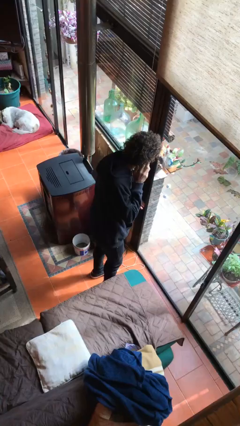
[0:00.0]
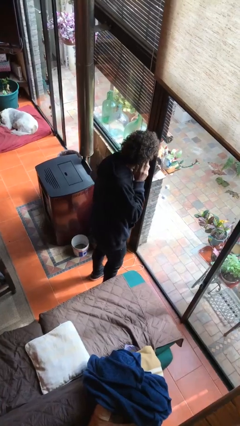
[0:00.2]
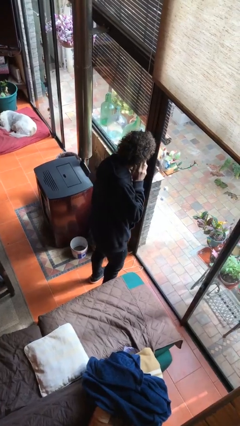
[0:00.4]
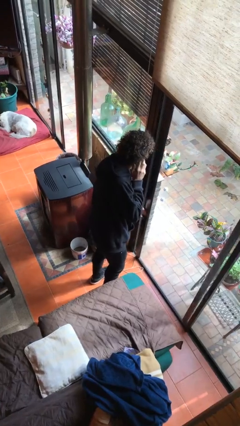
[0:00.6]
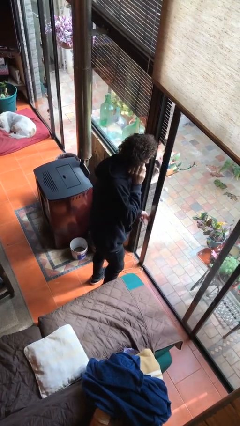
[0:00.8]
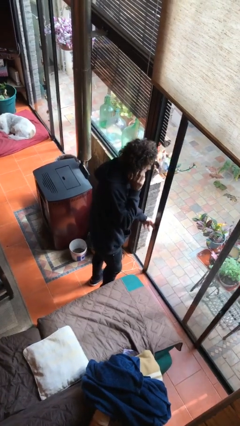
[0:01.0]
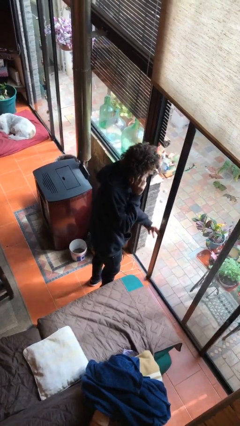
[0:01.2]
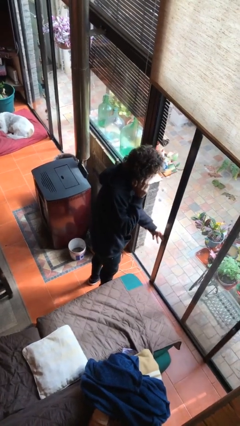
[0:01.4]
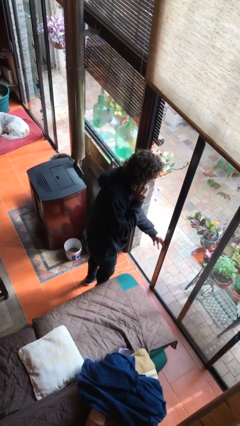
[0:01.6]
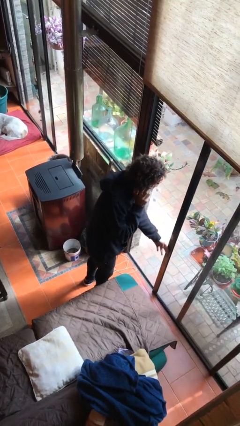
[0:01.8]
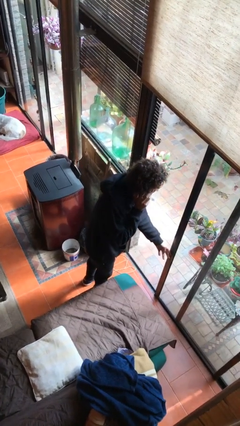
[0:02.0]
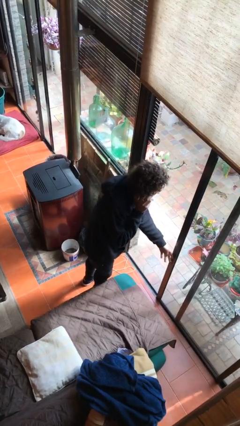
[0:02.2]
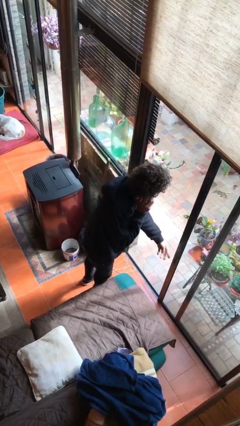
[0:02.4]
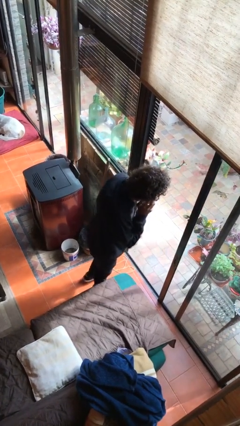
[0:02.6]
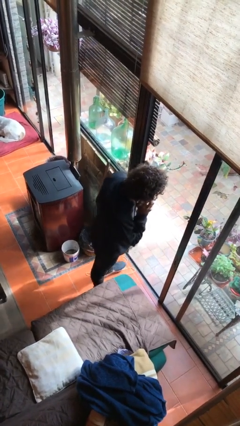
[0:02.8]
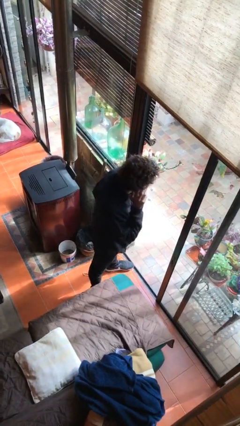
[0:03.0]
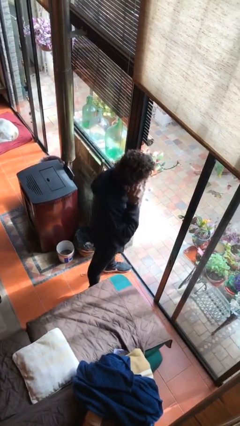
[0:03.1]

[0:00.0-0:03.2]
person opens facility door

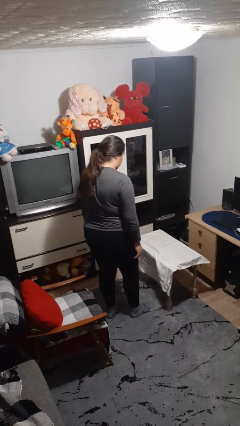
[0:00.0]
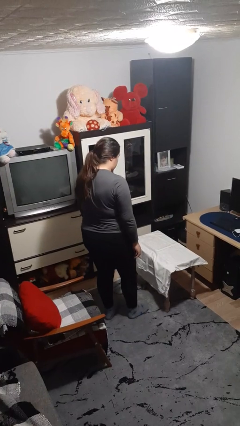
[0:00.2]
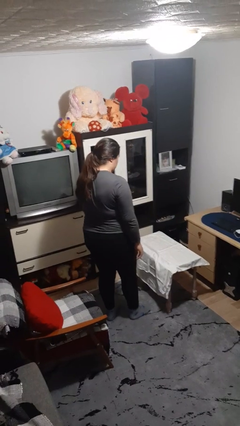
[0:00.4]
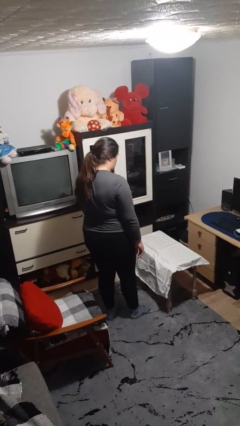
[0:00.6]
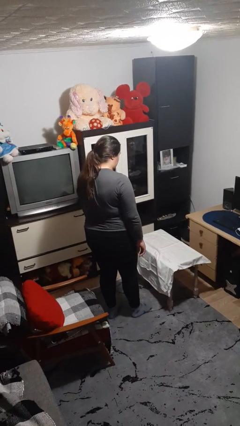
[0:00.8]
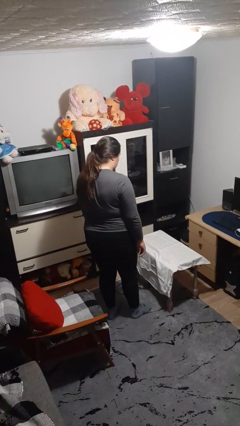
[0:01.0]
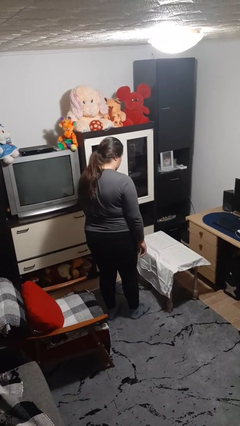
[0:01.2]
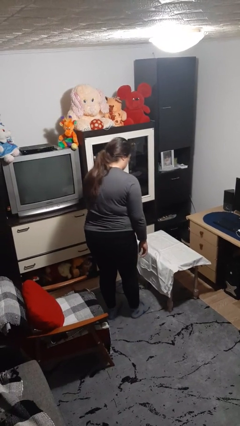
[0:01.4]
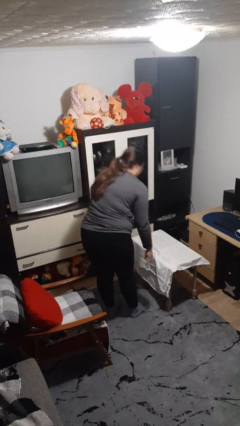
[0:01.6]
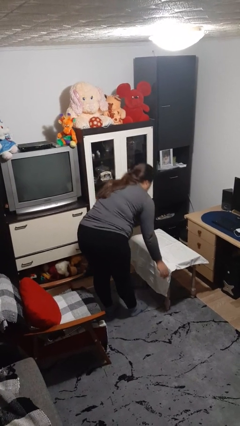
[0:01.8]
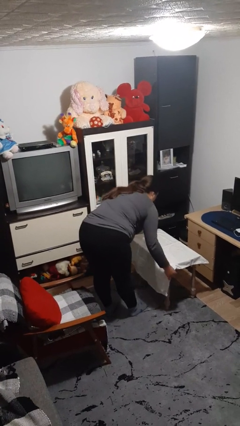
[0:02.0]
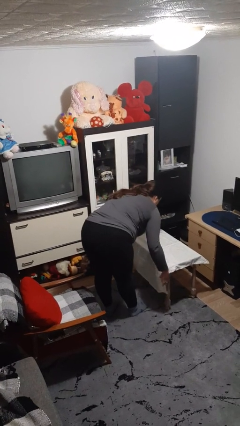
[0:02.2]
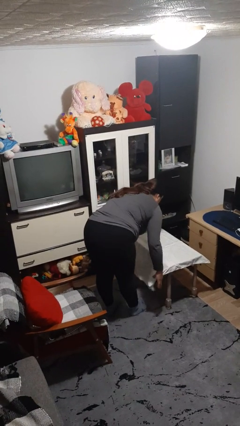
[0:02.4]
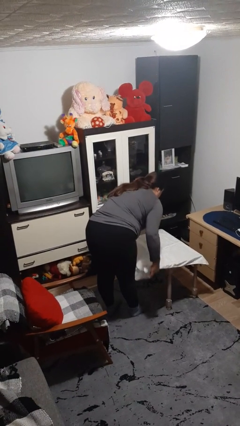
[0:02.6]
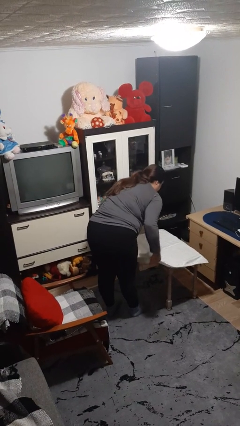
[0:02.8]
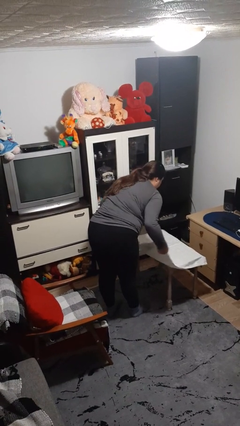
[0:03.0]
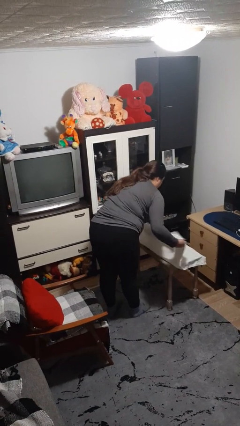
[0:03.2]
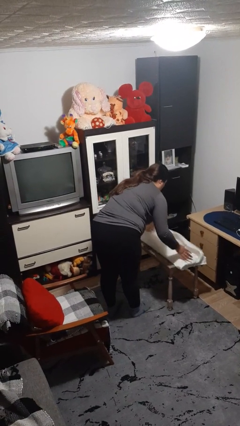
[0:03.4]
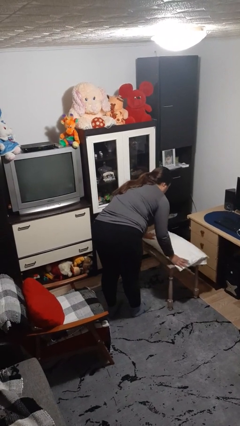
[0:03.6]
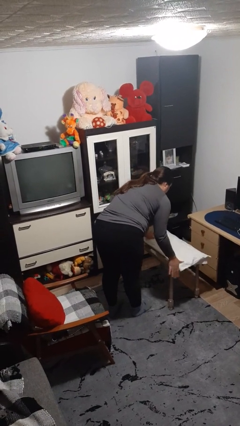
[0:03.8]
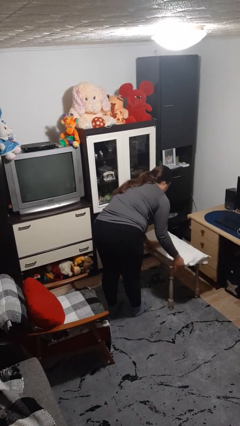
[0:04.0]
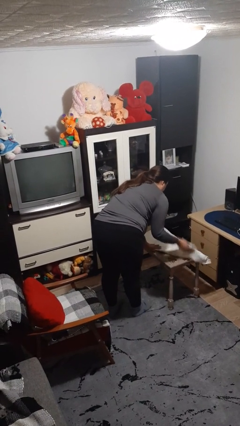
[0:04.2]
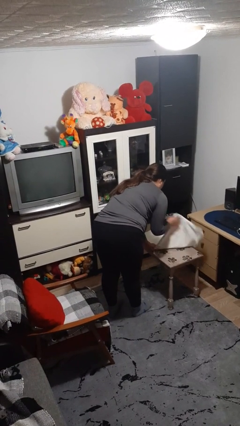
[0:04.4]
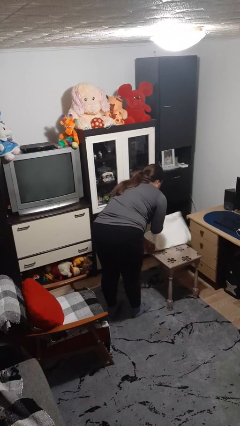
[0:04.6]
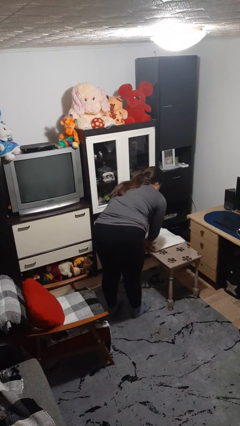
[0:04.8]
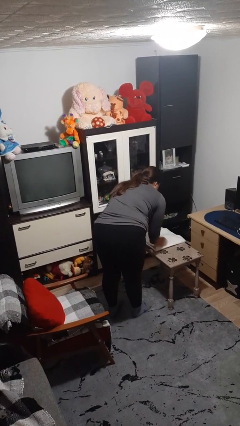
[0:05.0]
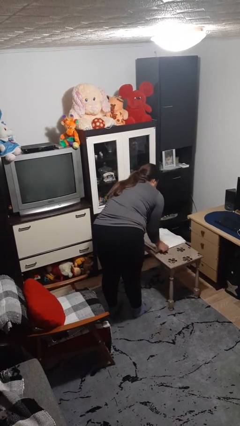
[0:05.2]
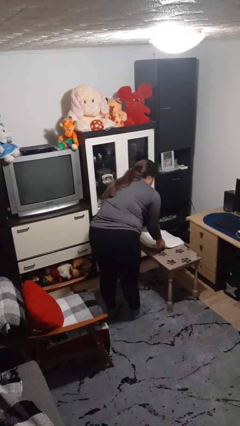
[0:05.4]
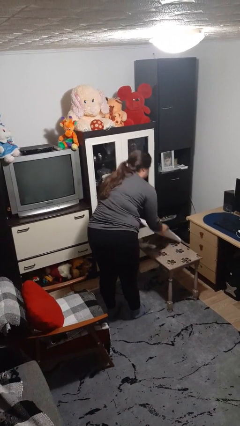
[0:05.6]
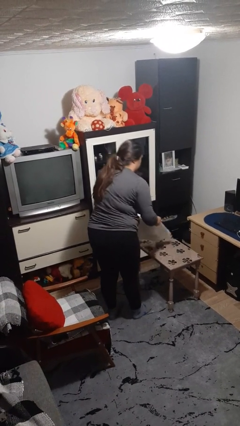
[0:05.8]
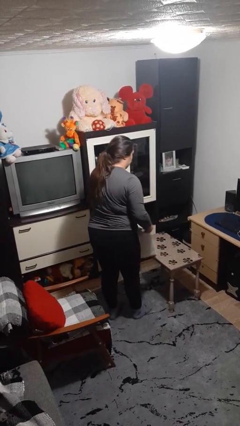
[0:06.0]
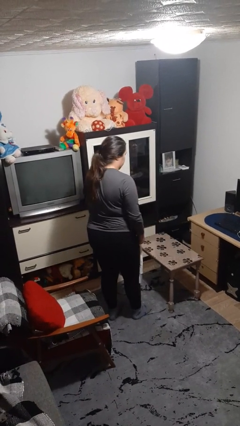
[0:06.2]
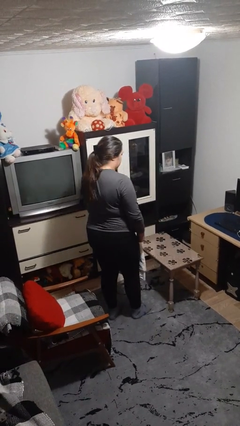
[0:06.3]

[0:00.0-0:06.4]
person folds tablecloth

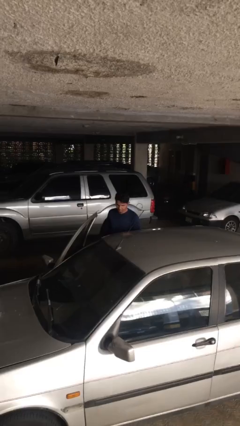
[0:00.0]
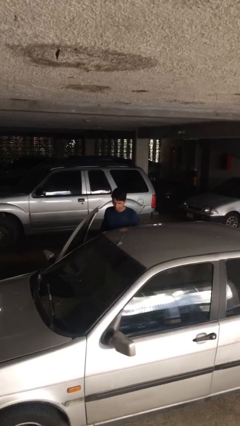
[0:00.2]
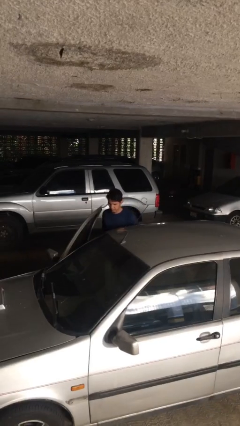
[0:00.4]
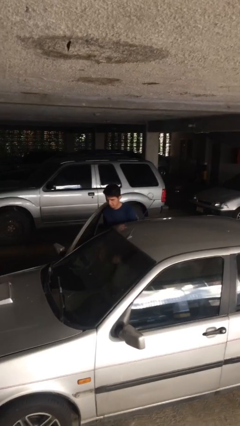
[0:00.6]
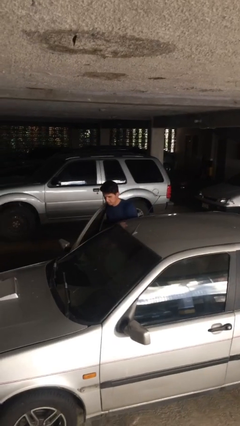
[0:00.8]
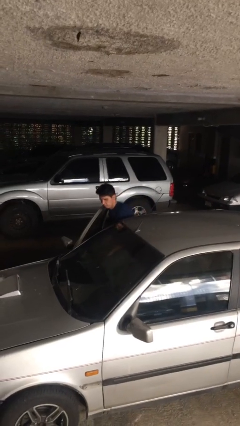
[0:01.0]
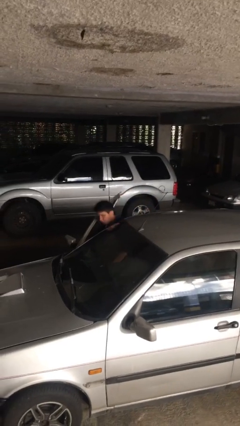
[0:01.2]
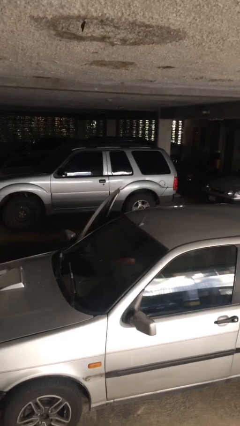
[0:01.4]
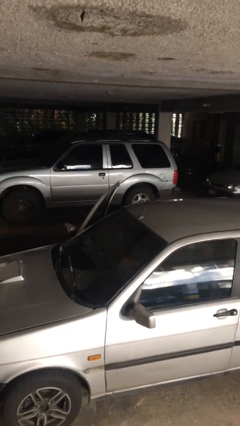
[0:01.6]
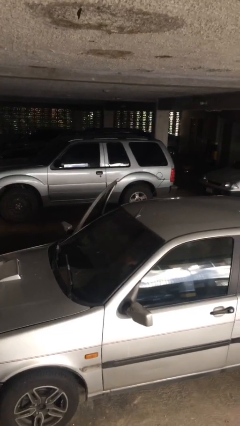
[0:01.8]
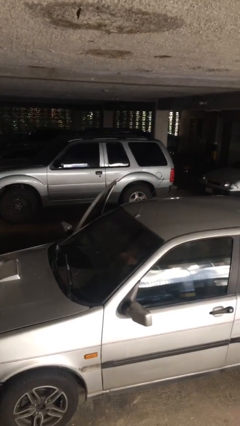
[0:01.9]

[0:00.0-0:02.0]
person enters car

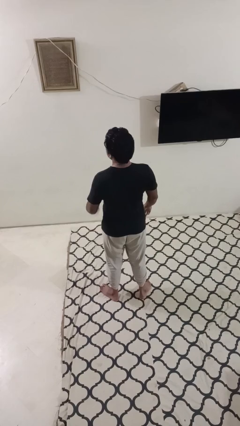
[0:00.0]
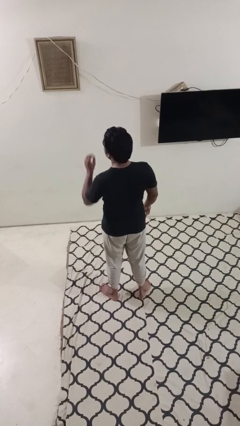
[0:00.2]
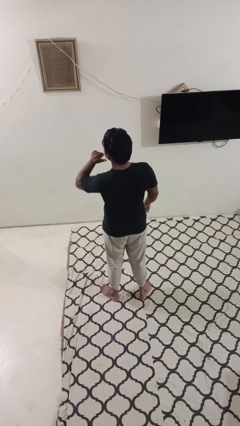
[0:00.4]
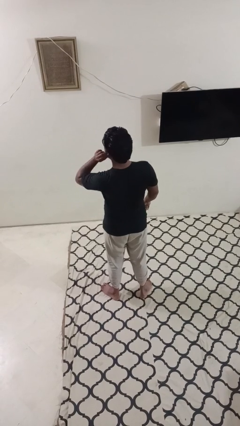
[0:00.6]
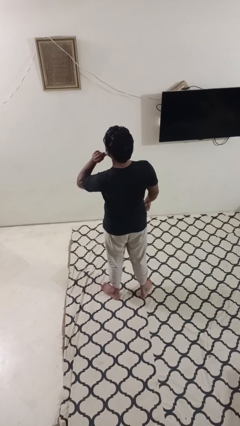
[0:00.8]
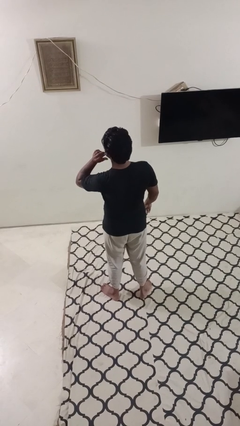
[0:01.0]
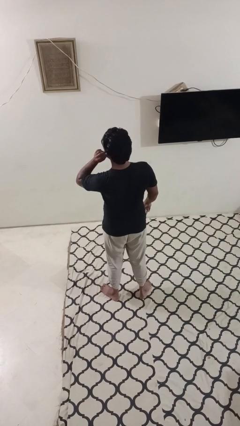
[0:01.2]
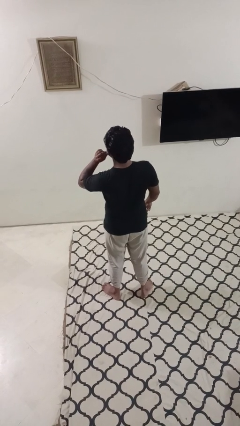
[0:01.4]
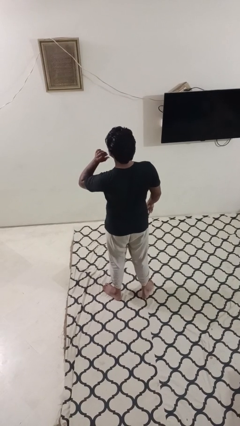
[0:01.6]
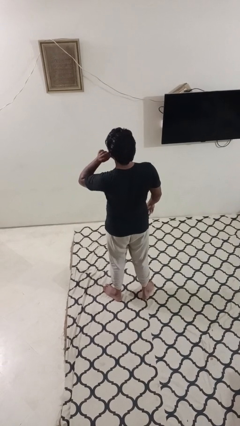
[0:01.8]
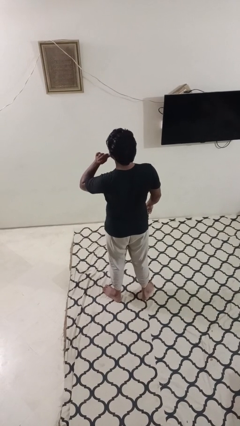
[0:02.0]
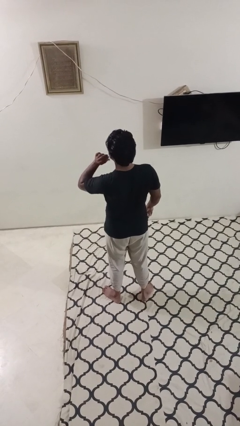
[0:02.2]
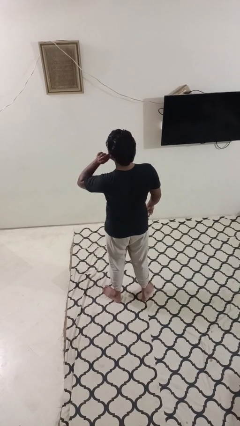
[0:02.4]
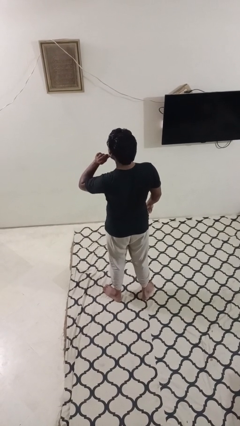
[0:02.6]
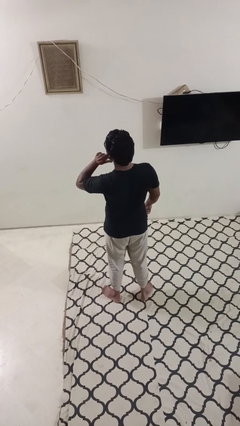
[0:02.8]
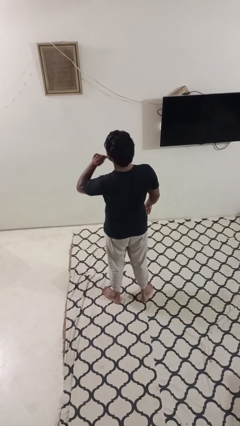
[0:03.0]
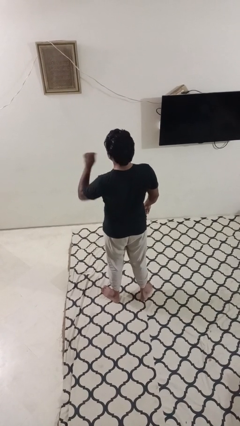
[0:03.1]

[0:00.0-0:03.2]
person touches earlobe

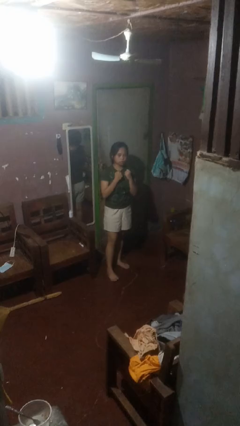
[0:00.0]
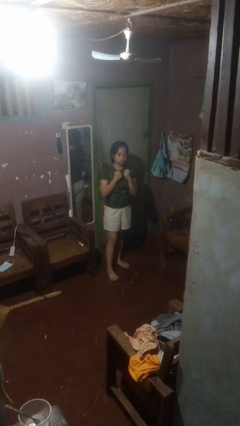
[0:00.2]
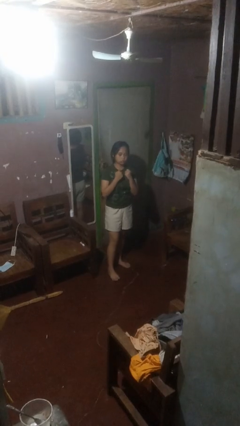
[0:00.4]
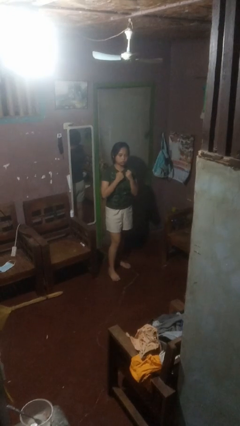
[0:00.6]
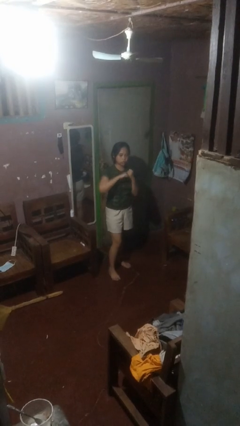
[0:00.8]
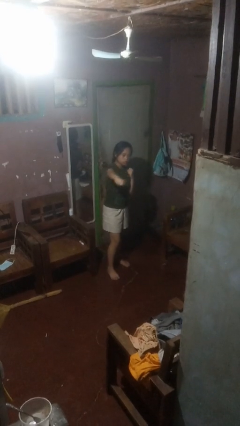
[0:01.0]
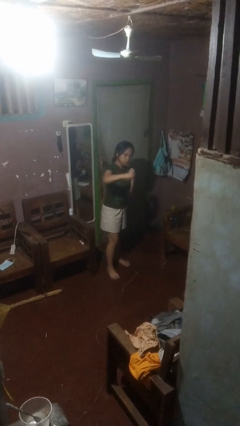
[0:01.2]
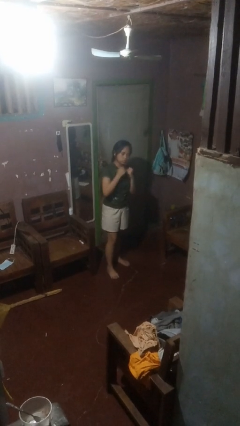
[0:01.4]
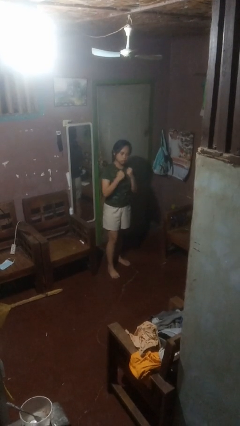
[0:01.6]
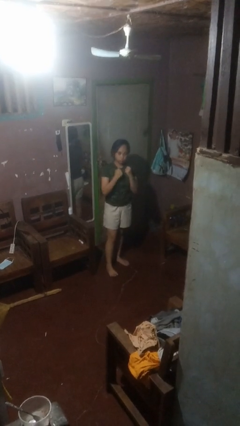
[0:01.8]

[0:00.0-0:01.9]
person punches

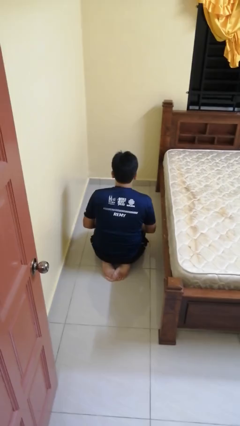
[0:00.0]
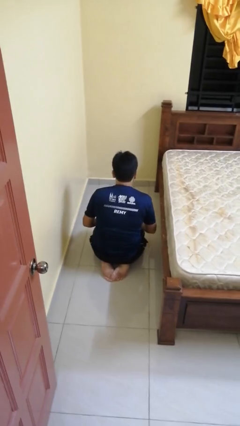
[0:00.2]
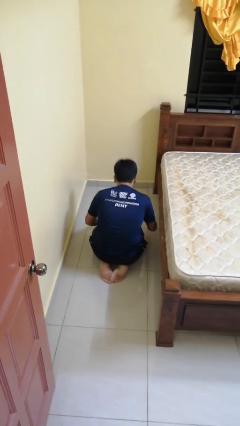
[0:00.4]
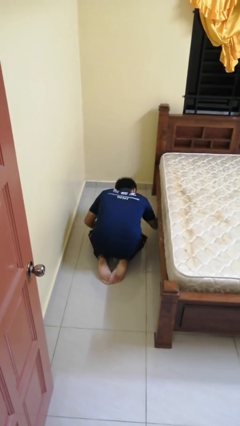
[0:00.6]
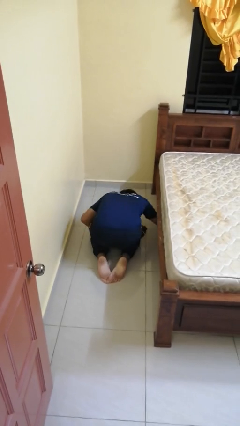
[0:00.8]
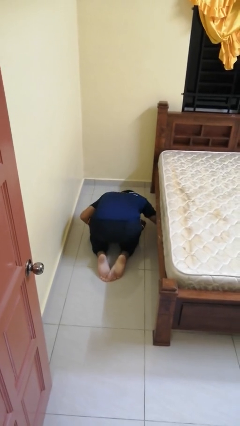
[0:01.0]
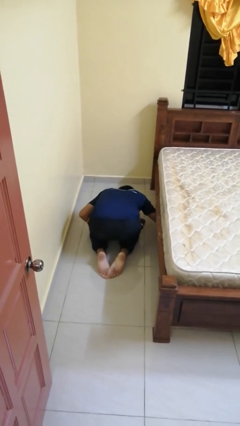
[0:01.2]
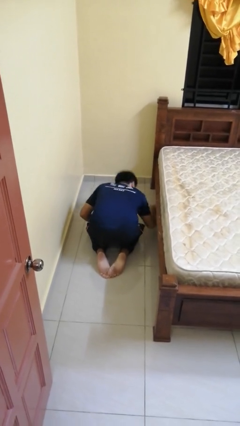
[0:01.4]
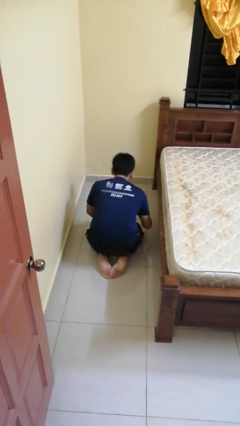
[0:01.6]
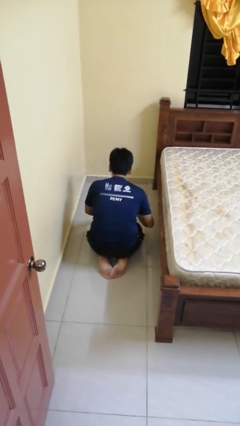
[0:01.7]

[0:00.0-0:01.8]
person searches under bed
